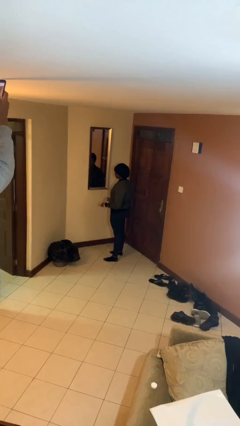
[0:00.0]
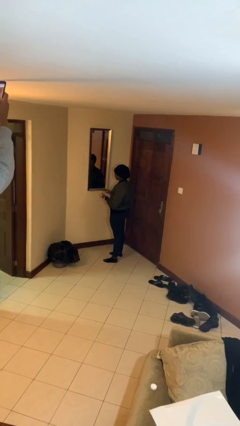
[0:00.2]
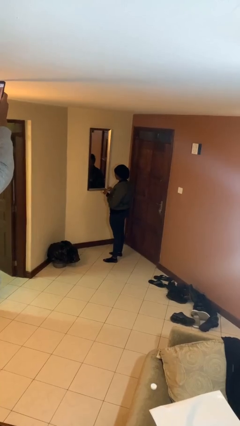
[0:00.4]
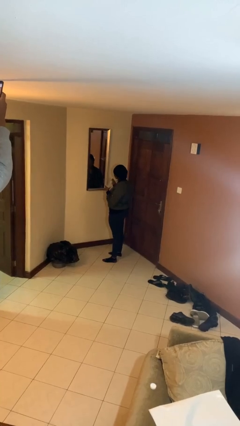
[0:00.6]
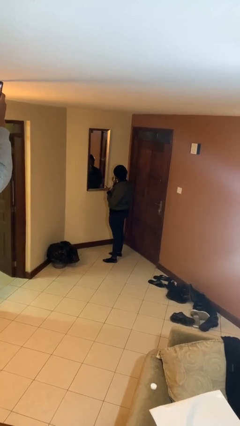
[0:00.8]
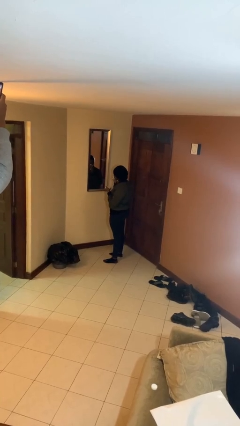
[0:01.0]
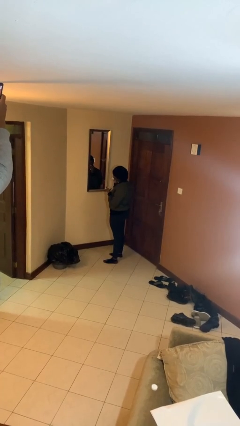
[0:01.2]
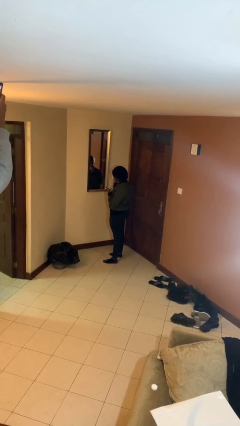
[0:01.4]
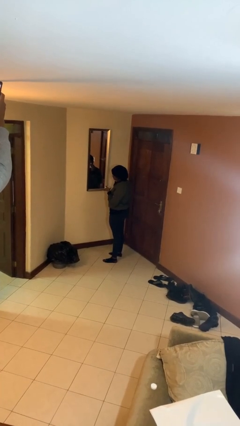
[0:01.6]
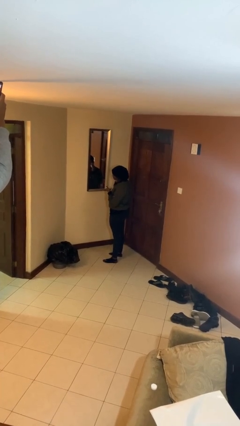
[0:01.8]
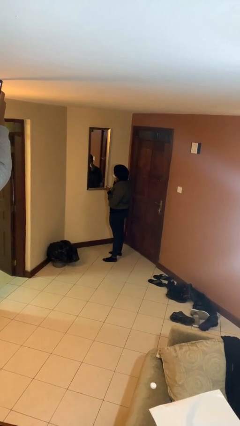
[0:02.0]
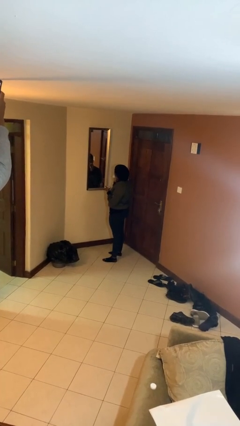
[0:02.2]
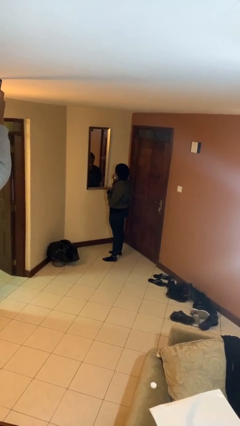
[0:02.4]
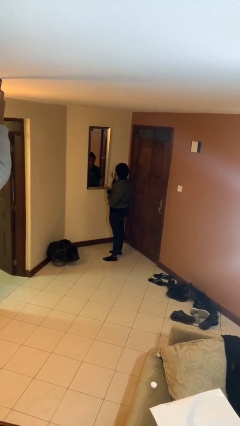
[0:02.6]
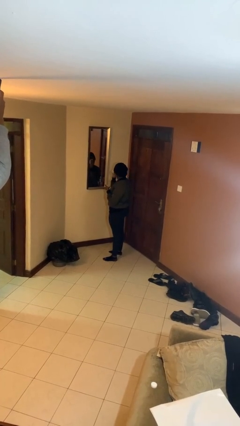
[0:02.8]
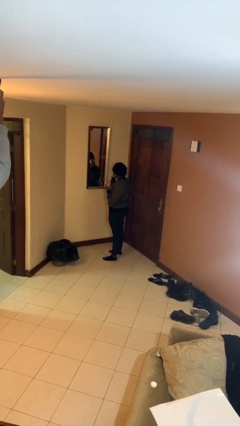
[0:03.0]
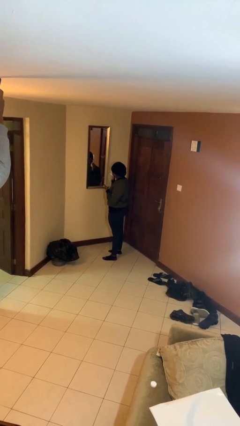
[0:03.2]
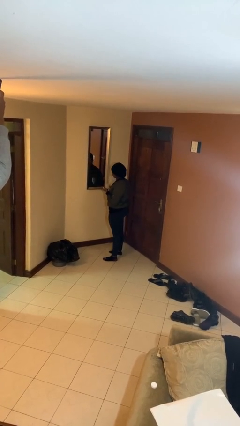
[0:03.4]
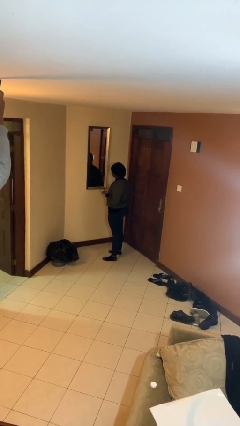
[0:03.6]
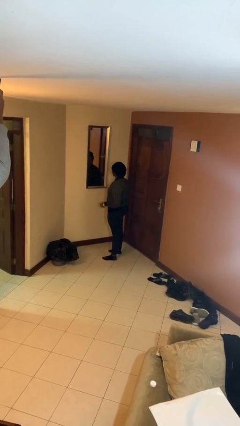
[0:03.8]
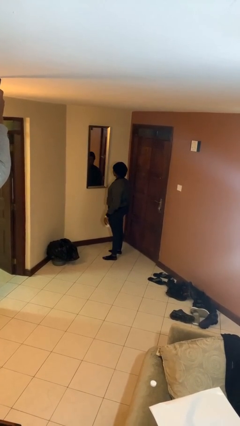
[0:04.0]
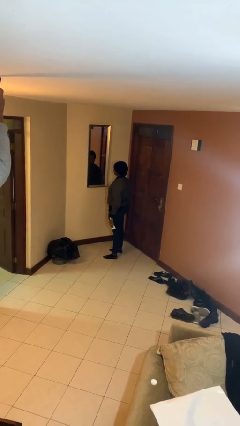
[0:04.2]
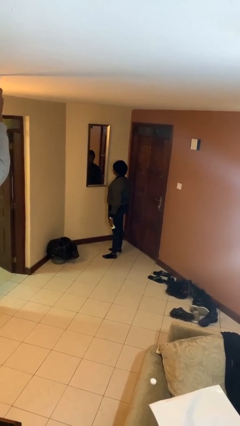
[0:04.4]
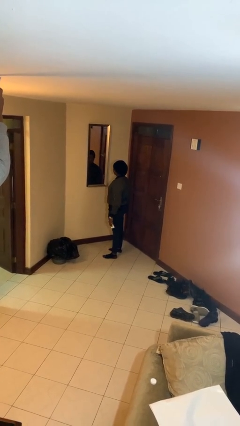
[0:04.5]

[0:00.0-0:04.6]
person applies foundation makeup

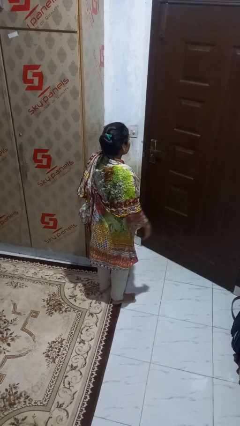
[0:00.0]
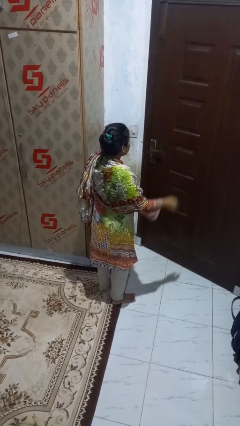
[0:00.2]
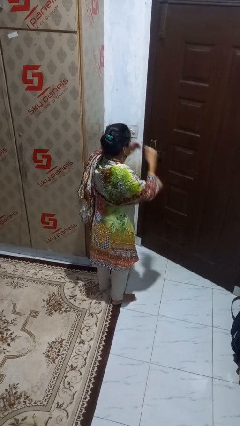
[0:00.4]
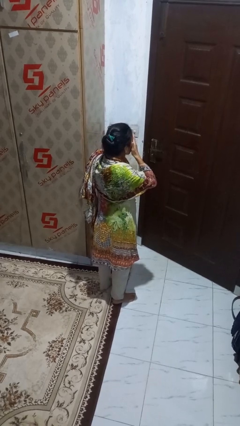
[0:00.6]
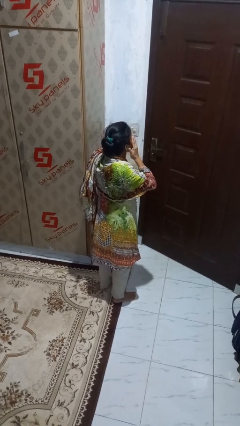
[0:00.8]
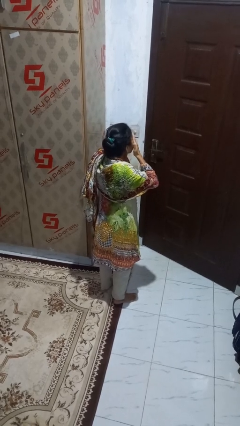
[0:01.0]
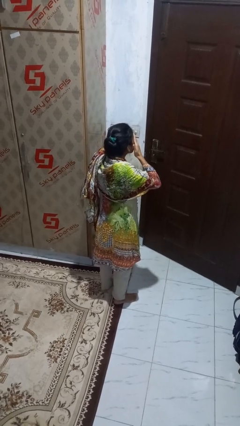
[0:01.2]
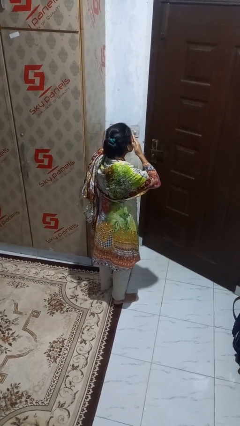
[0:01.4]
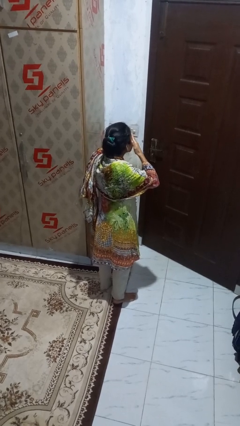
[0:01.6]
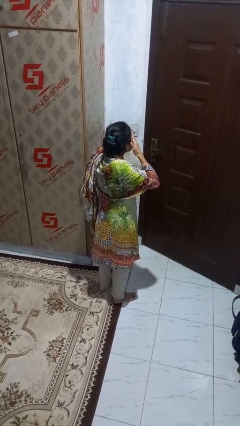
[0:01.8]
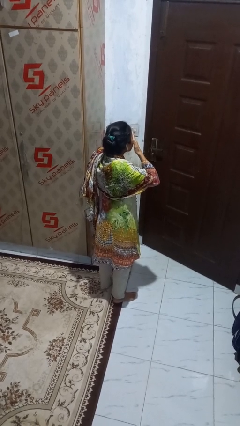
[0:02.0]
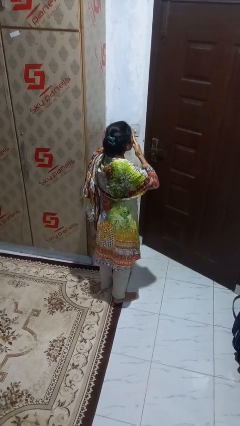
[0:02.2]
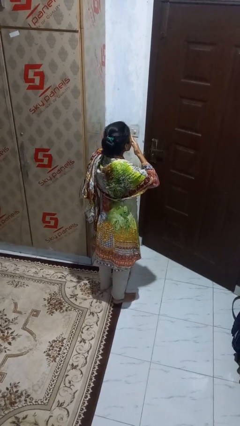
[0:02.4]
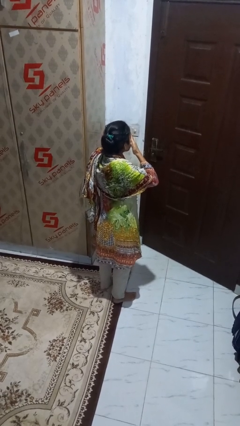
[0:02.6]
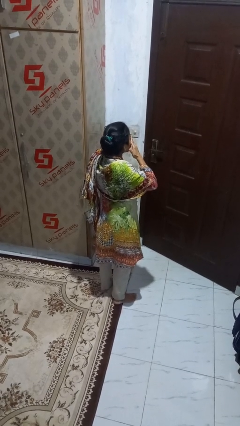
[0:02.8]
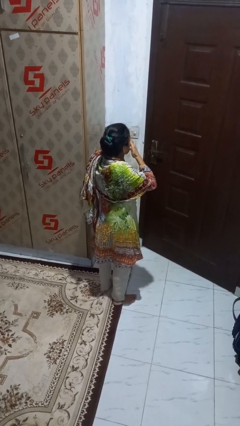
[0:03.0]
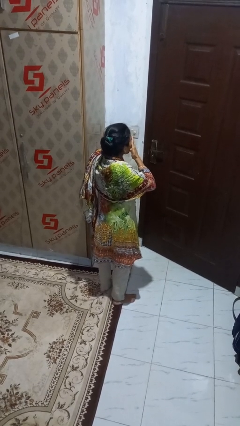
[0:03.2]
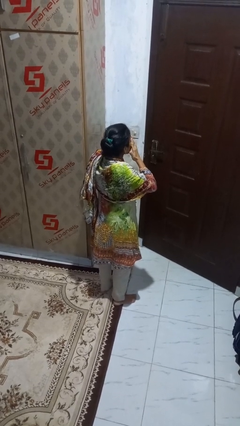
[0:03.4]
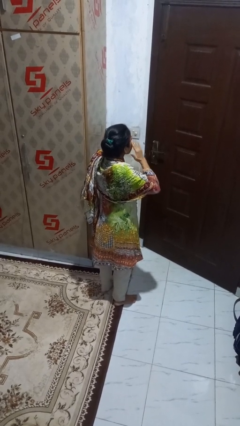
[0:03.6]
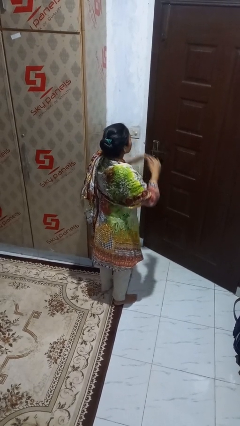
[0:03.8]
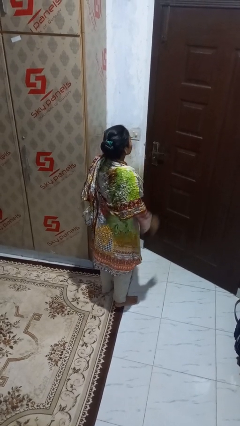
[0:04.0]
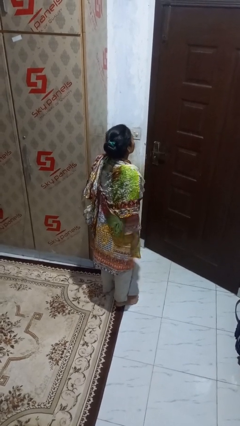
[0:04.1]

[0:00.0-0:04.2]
person rubs eyes

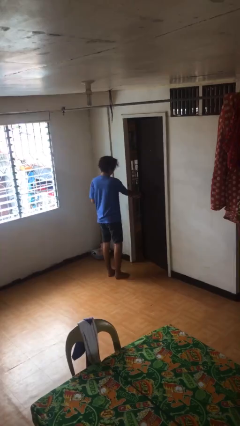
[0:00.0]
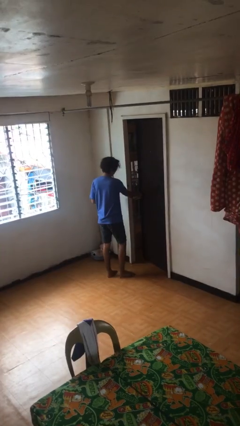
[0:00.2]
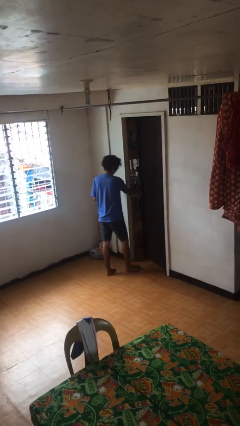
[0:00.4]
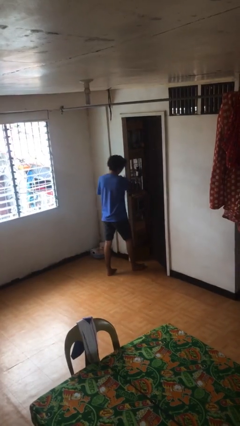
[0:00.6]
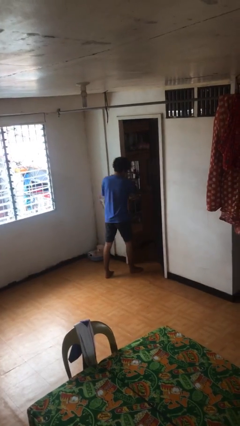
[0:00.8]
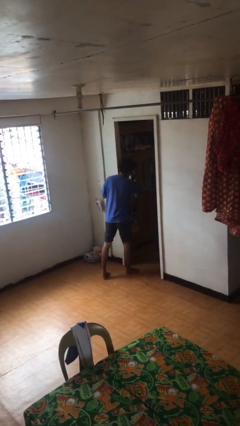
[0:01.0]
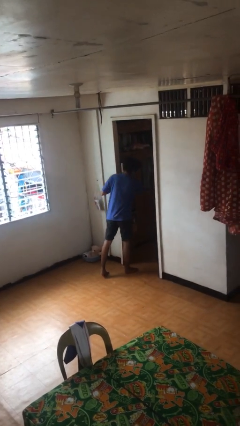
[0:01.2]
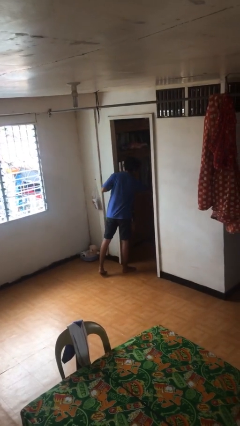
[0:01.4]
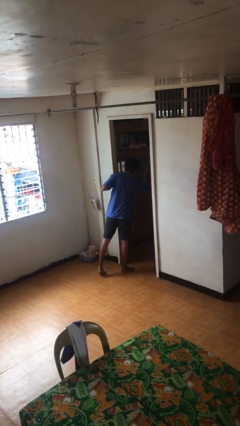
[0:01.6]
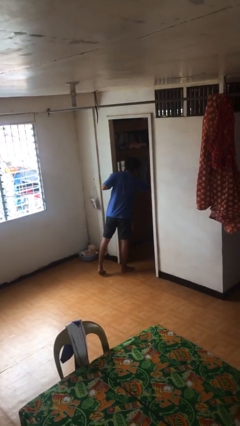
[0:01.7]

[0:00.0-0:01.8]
person opens facility door

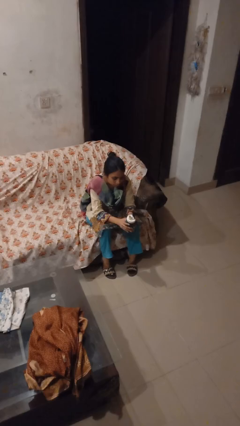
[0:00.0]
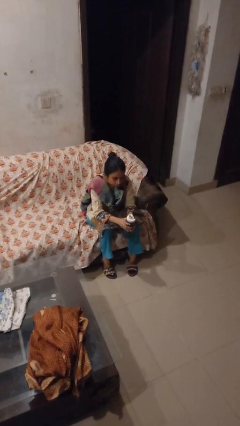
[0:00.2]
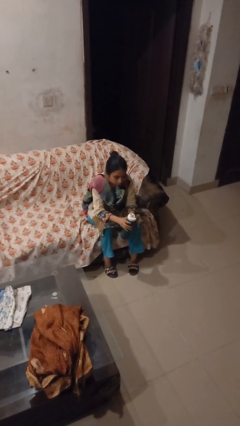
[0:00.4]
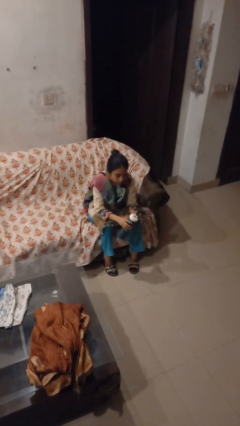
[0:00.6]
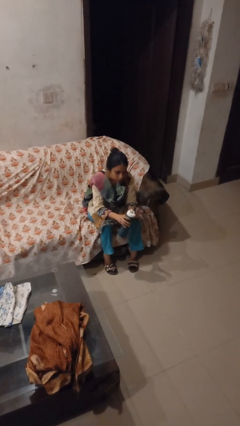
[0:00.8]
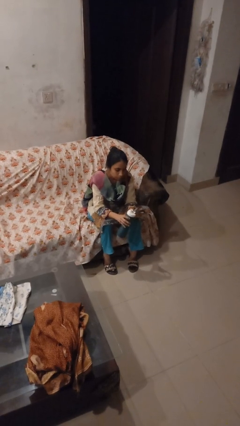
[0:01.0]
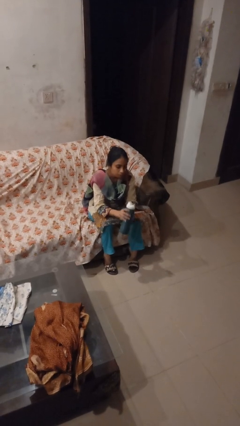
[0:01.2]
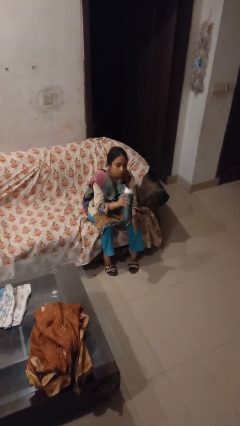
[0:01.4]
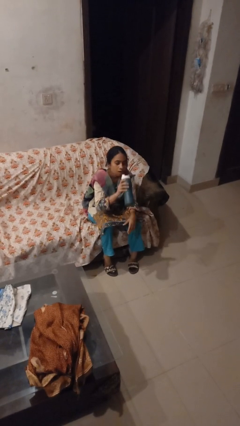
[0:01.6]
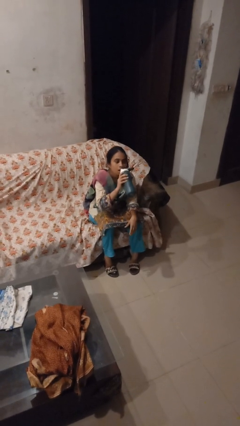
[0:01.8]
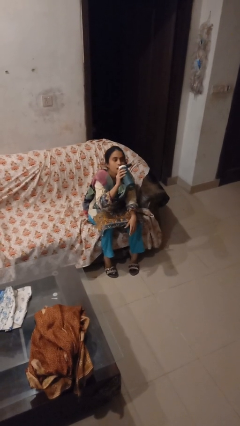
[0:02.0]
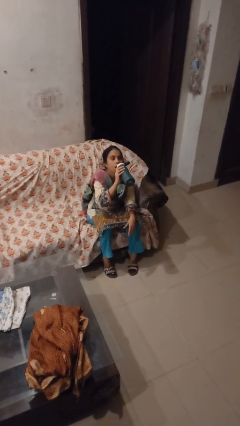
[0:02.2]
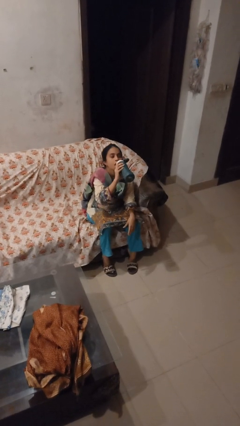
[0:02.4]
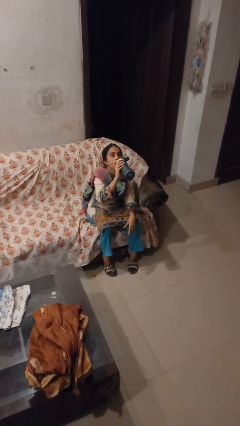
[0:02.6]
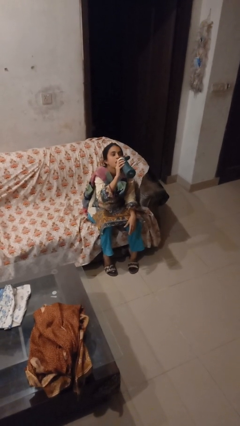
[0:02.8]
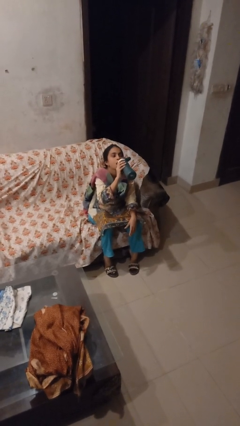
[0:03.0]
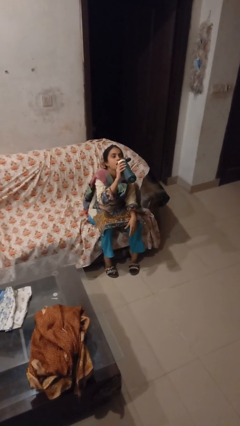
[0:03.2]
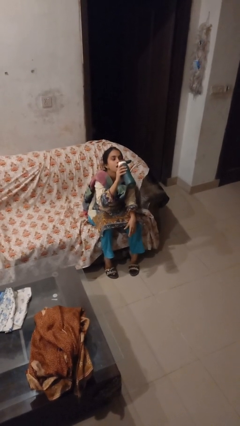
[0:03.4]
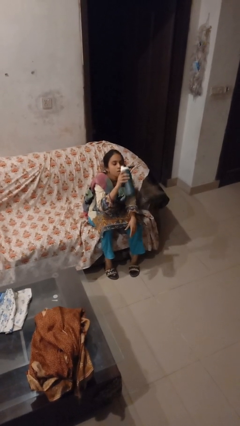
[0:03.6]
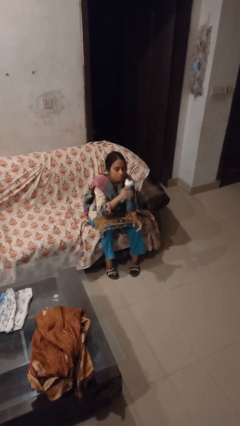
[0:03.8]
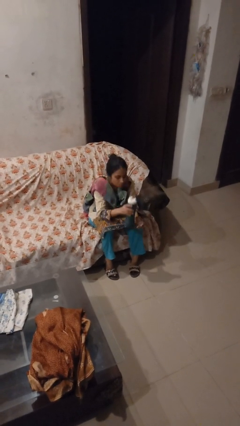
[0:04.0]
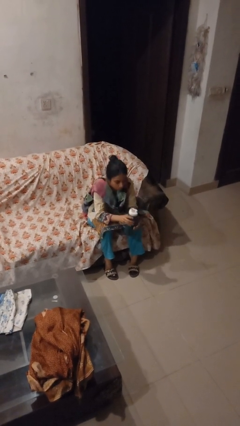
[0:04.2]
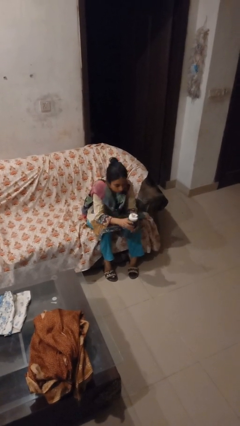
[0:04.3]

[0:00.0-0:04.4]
person drinks from bottle

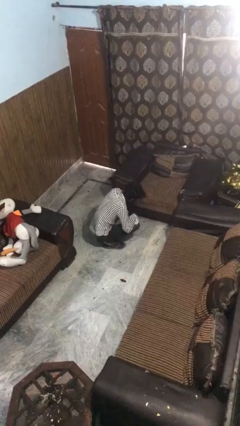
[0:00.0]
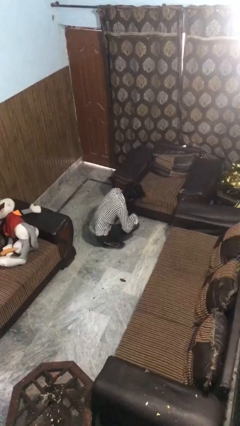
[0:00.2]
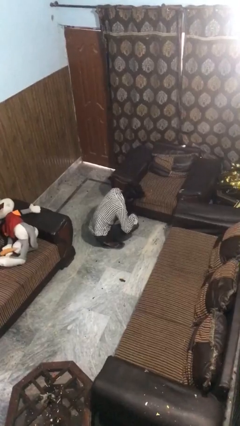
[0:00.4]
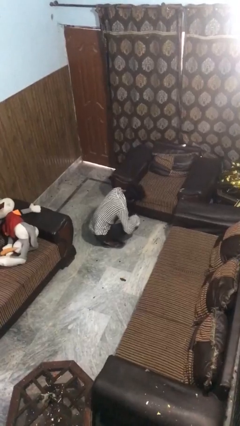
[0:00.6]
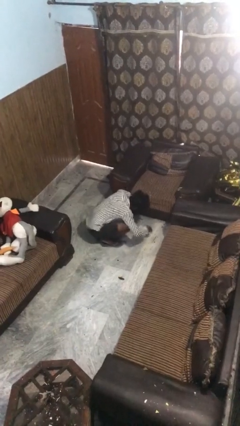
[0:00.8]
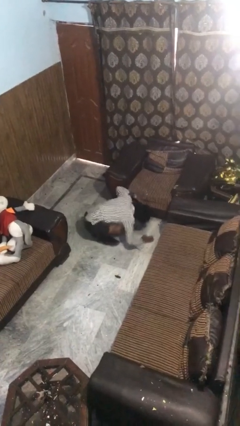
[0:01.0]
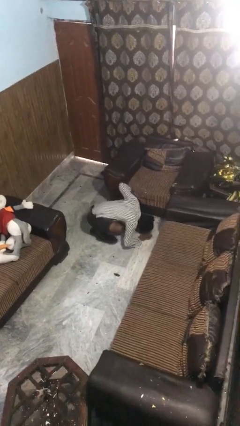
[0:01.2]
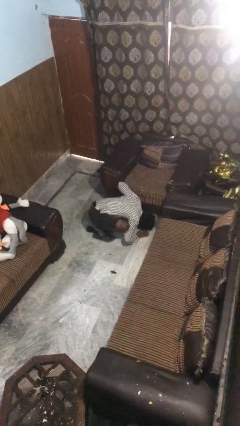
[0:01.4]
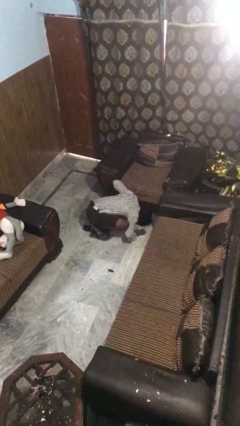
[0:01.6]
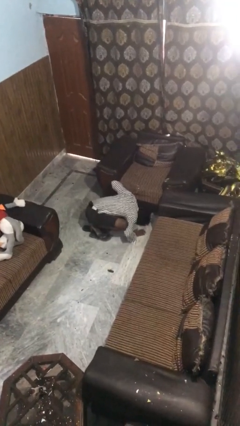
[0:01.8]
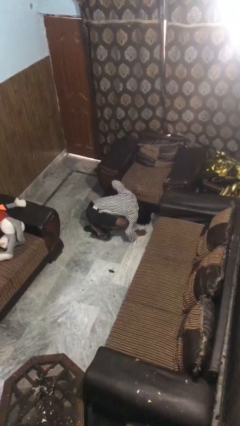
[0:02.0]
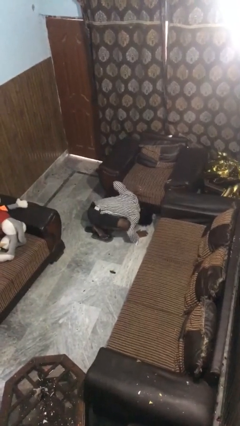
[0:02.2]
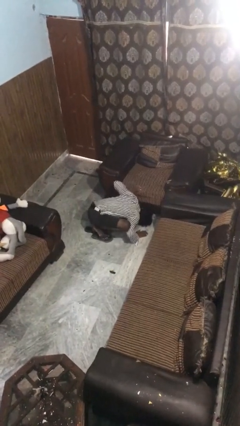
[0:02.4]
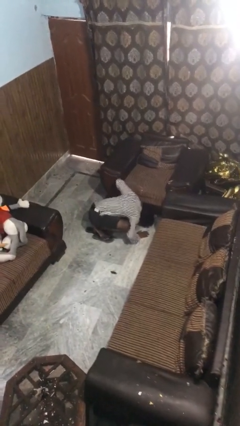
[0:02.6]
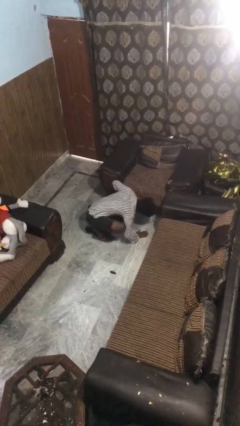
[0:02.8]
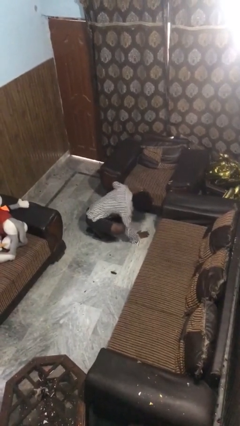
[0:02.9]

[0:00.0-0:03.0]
person searches under couch

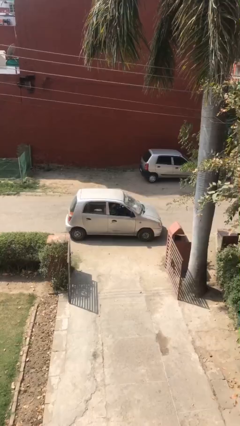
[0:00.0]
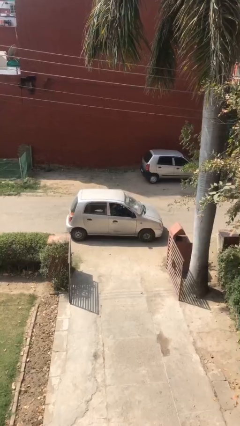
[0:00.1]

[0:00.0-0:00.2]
car drops off person
